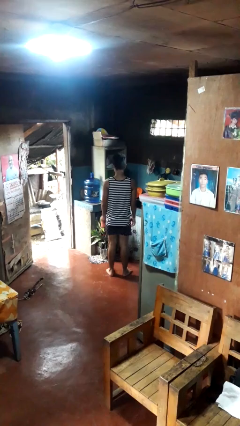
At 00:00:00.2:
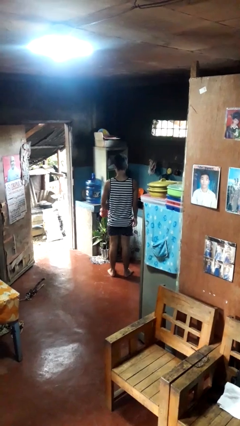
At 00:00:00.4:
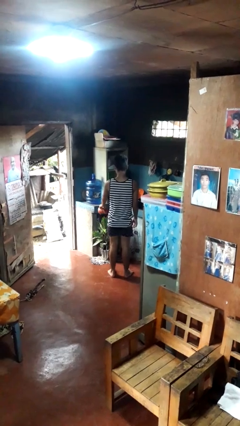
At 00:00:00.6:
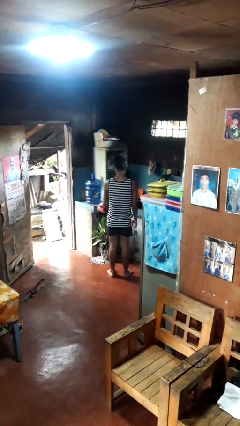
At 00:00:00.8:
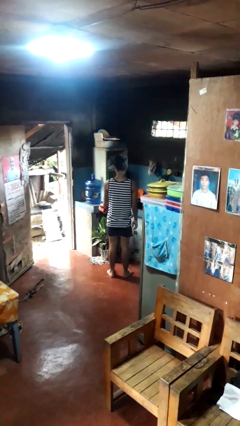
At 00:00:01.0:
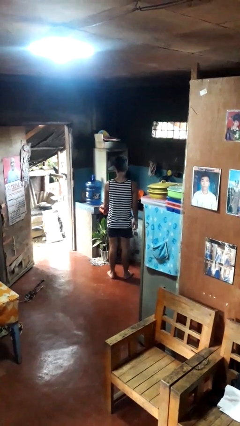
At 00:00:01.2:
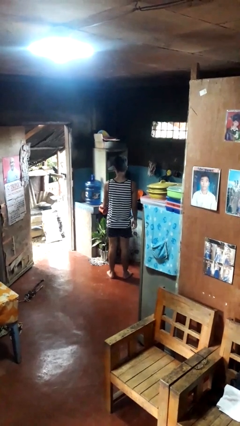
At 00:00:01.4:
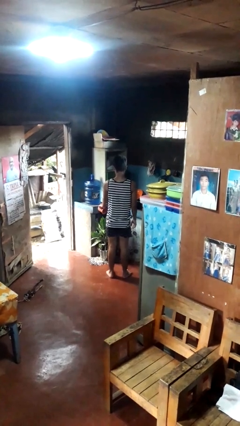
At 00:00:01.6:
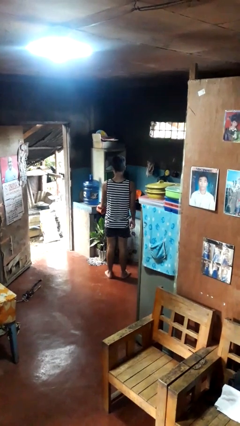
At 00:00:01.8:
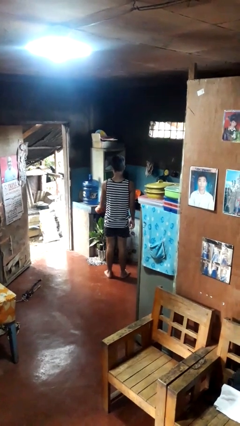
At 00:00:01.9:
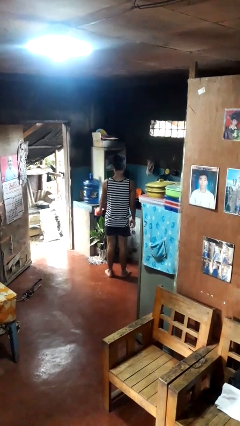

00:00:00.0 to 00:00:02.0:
person waters houseplant

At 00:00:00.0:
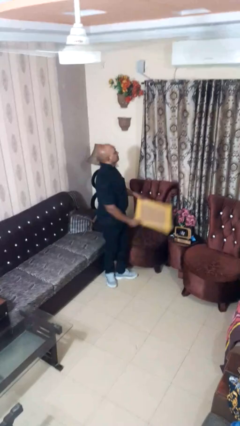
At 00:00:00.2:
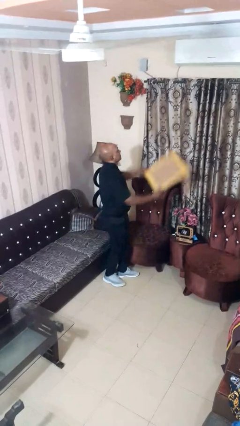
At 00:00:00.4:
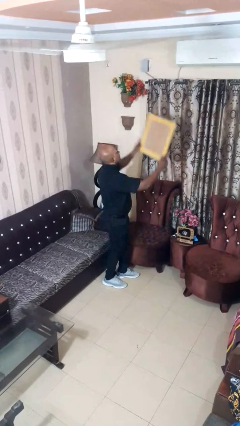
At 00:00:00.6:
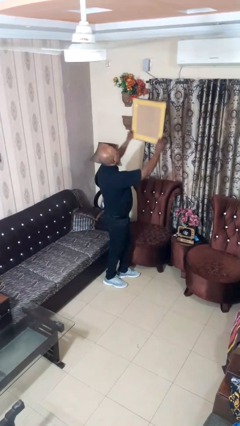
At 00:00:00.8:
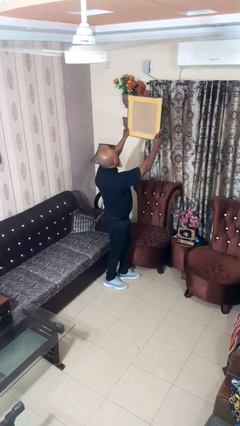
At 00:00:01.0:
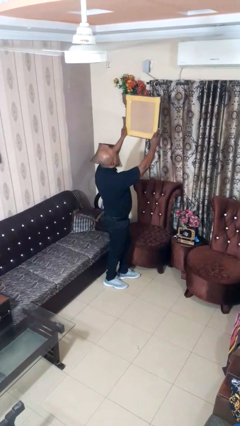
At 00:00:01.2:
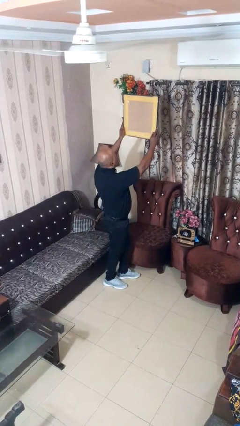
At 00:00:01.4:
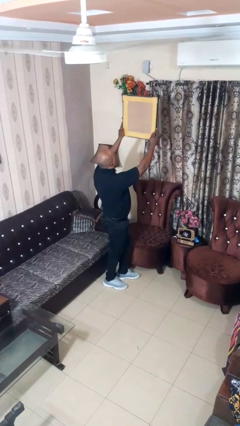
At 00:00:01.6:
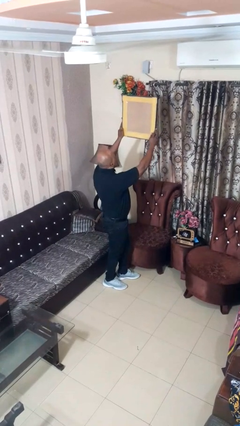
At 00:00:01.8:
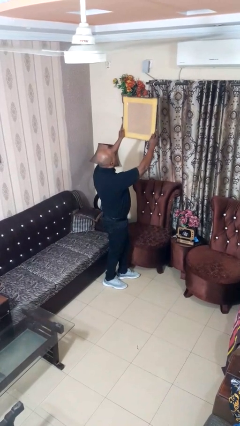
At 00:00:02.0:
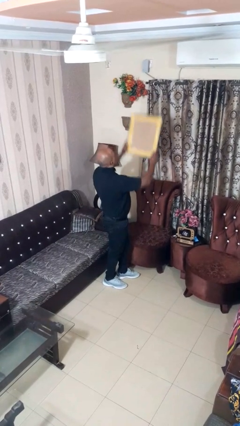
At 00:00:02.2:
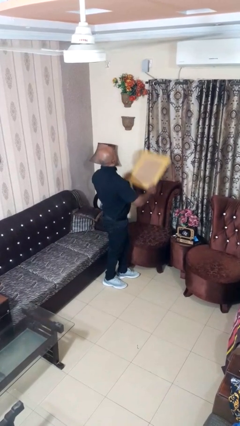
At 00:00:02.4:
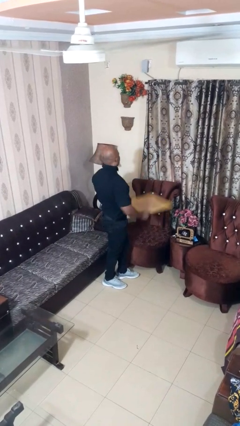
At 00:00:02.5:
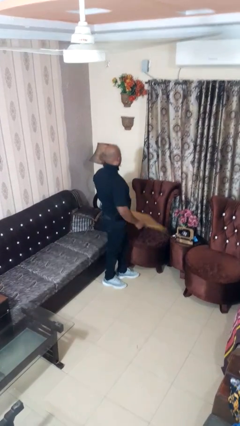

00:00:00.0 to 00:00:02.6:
person holds object above head

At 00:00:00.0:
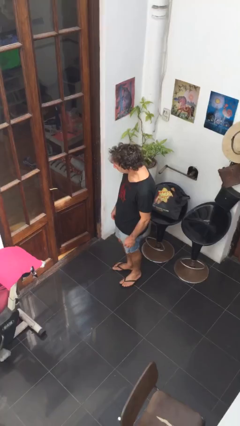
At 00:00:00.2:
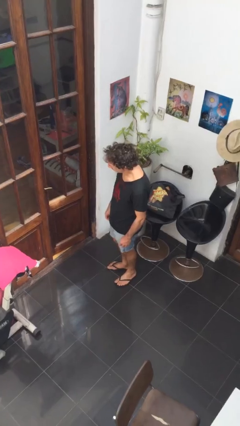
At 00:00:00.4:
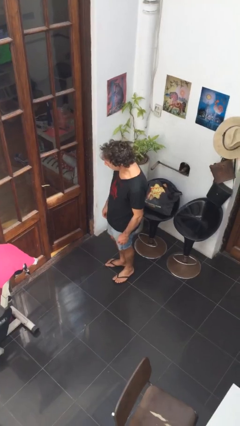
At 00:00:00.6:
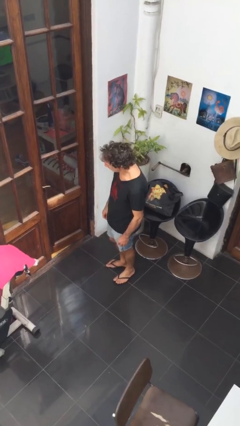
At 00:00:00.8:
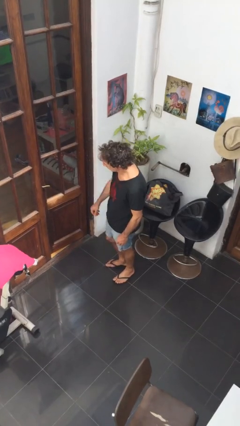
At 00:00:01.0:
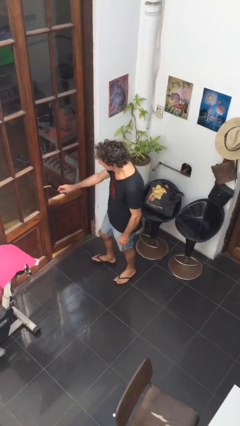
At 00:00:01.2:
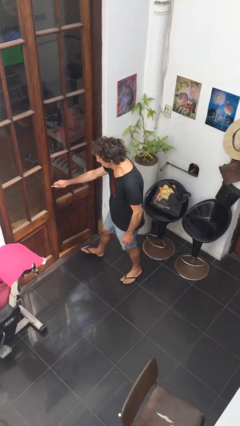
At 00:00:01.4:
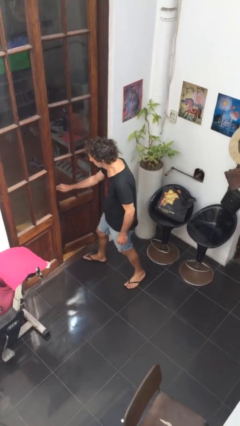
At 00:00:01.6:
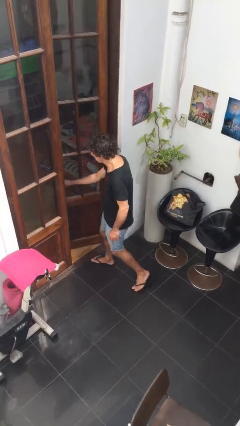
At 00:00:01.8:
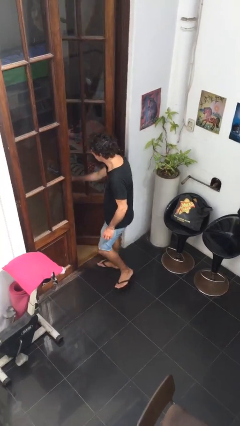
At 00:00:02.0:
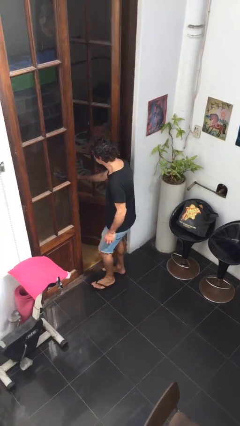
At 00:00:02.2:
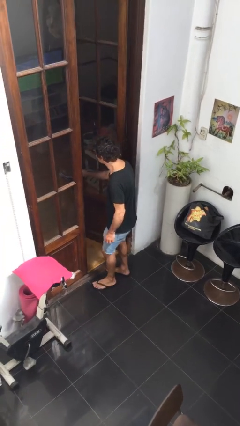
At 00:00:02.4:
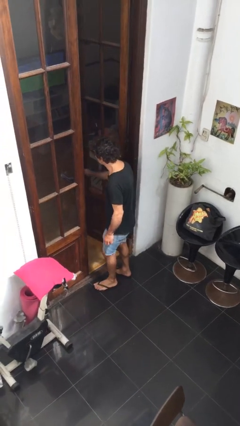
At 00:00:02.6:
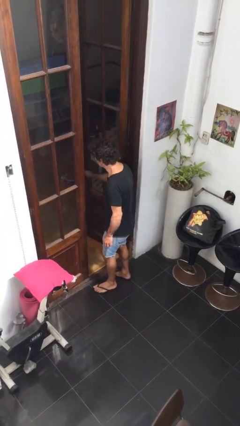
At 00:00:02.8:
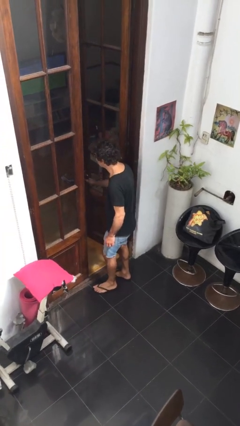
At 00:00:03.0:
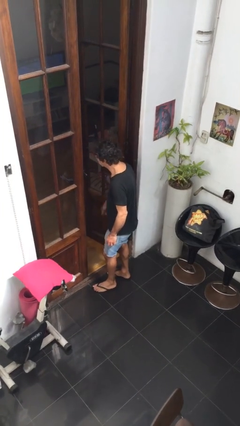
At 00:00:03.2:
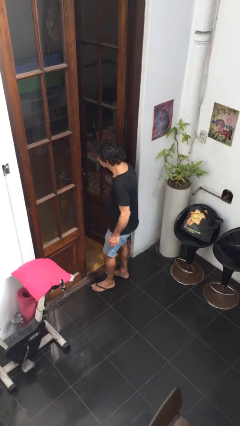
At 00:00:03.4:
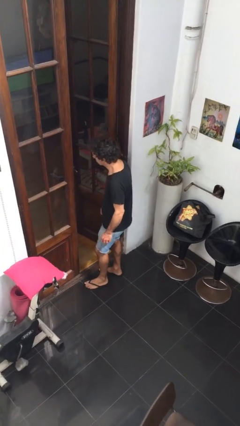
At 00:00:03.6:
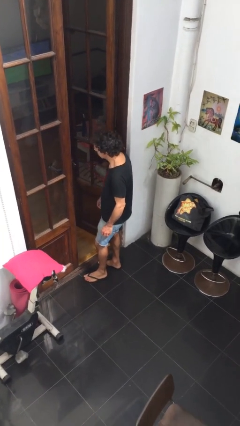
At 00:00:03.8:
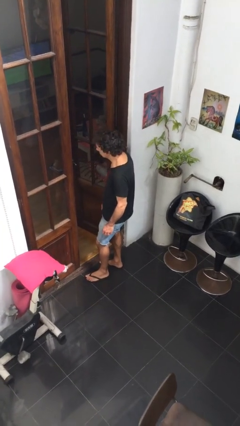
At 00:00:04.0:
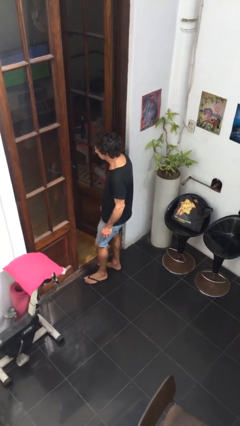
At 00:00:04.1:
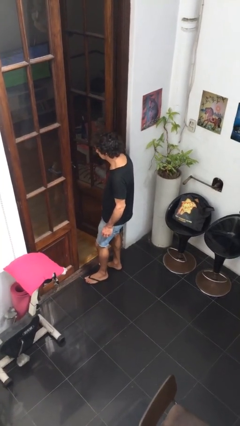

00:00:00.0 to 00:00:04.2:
person opens facility door

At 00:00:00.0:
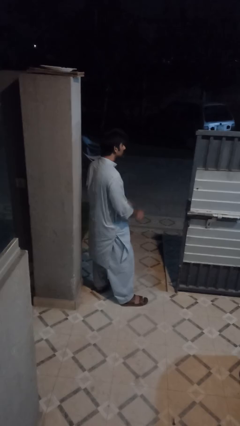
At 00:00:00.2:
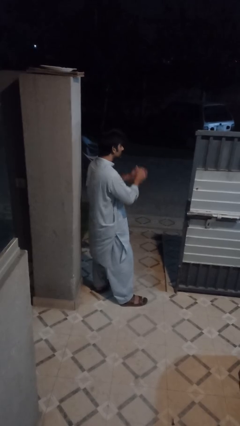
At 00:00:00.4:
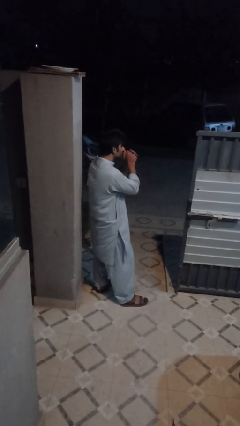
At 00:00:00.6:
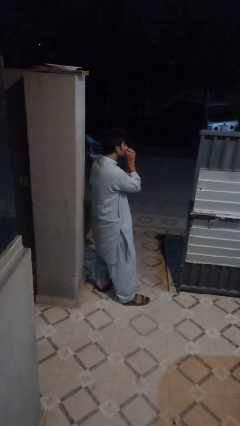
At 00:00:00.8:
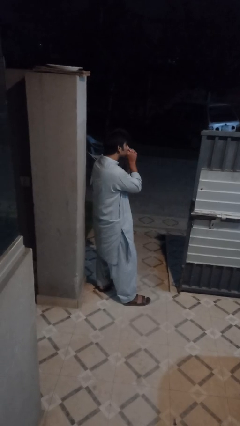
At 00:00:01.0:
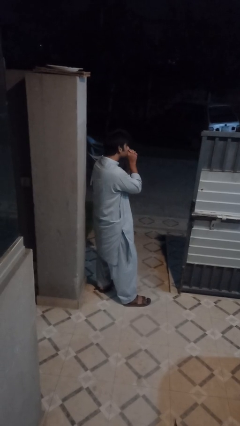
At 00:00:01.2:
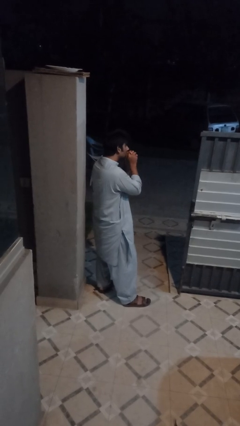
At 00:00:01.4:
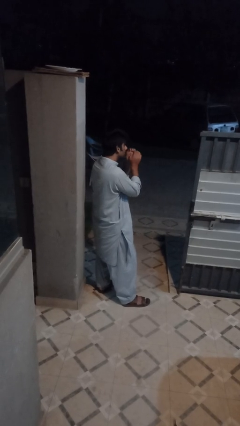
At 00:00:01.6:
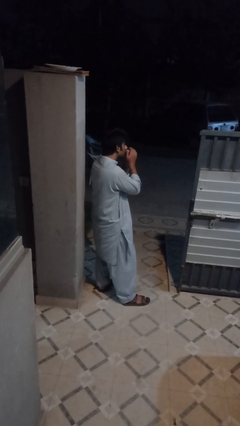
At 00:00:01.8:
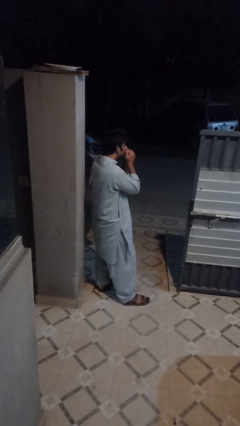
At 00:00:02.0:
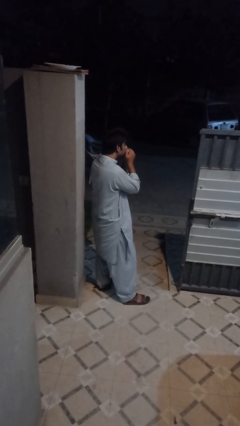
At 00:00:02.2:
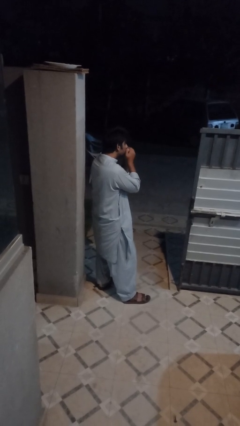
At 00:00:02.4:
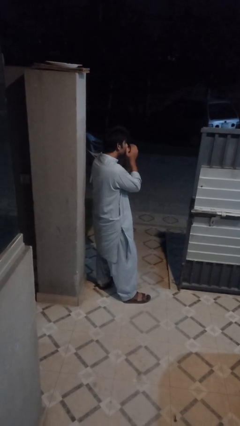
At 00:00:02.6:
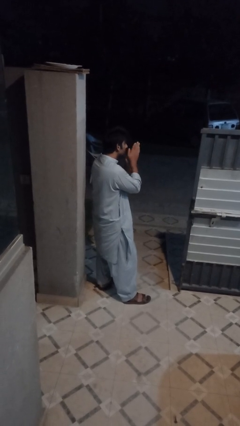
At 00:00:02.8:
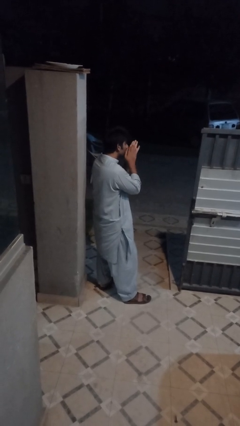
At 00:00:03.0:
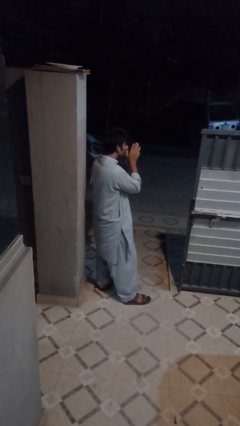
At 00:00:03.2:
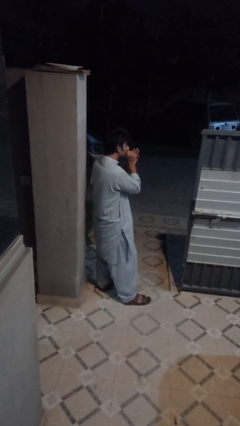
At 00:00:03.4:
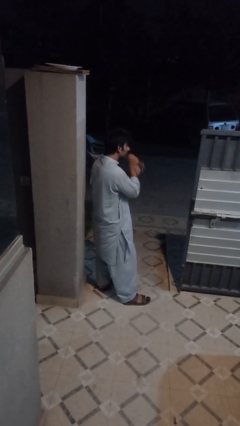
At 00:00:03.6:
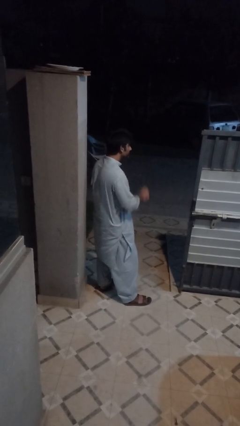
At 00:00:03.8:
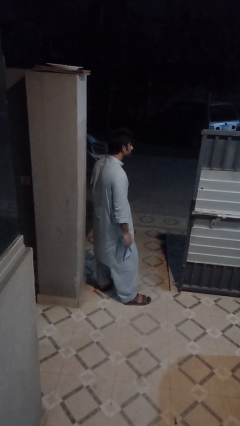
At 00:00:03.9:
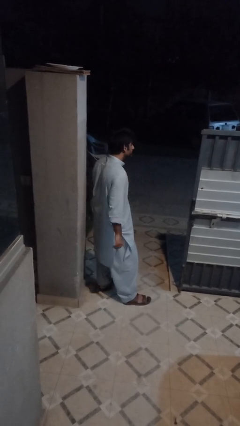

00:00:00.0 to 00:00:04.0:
person blows into hands

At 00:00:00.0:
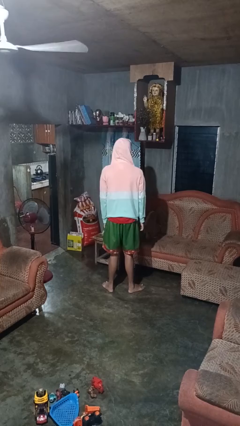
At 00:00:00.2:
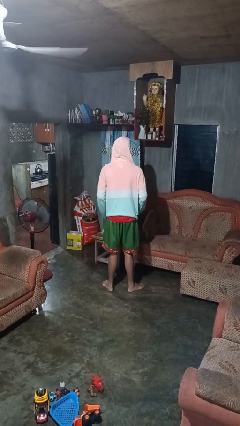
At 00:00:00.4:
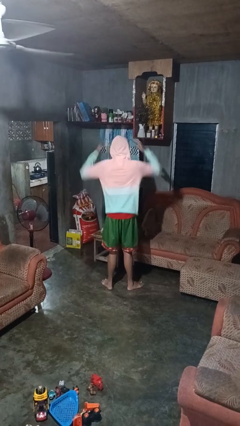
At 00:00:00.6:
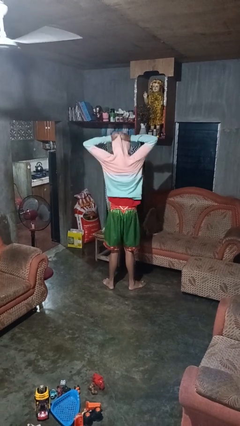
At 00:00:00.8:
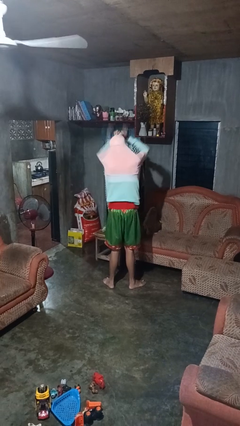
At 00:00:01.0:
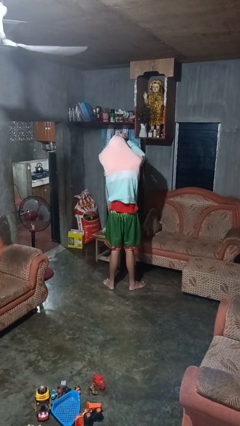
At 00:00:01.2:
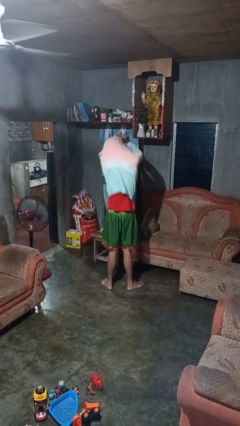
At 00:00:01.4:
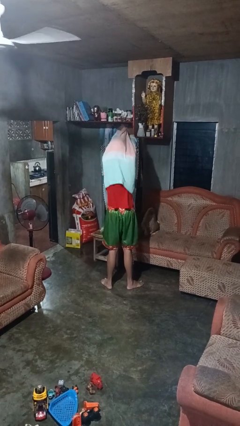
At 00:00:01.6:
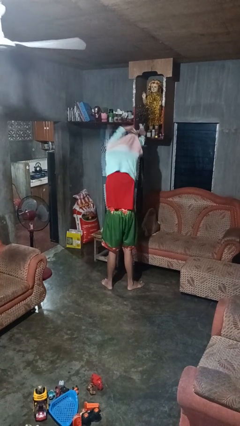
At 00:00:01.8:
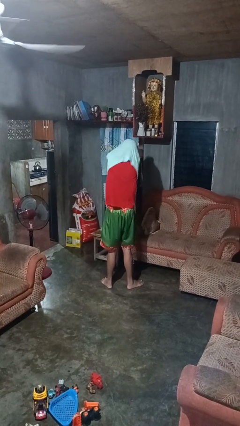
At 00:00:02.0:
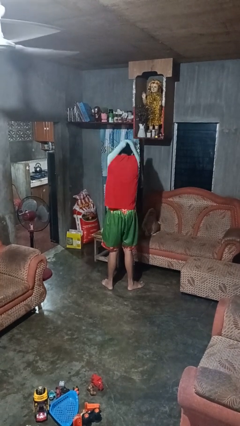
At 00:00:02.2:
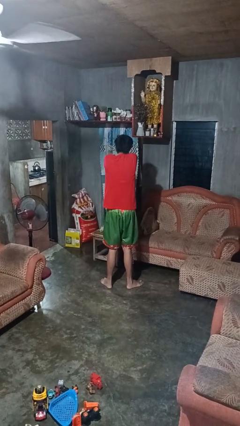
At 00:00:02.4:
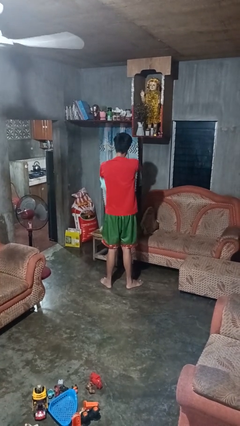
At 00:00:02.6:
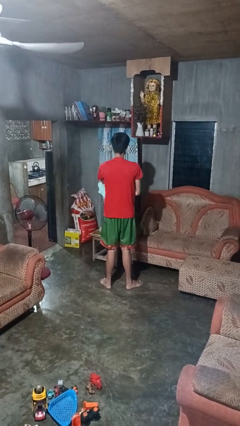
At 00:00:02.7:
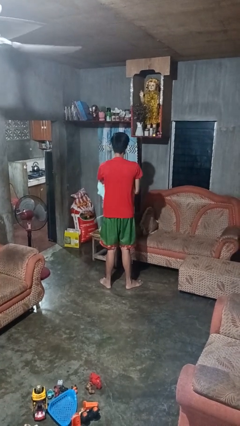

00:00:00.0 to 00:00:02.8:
person takes off hoodie

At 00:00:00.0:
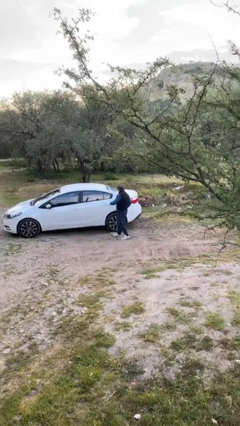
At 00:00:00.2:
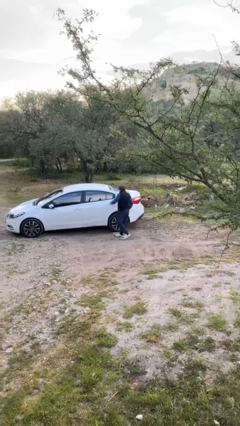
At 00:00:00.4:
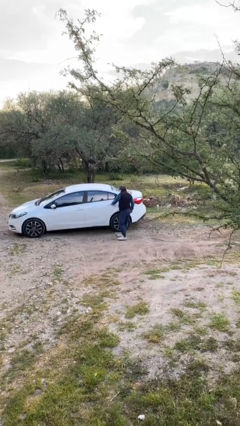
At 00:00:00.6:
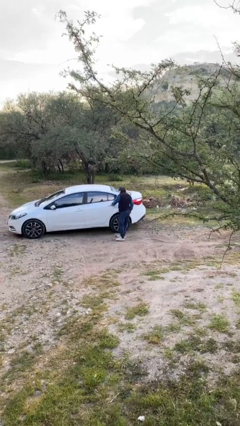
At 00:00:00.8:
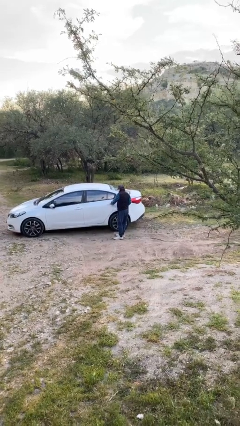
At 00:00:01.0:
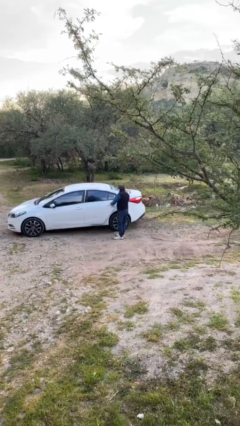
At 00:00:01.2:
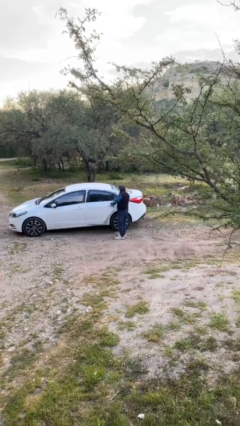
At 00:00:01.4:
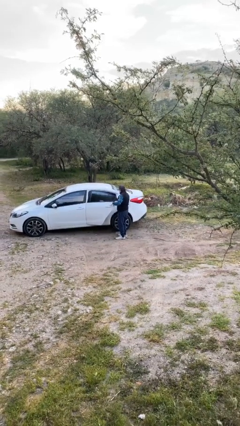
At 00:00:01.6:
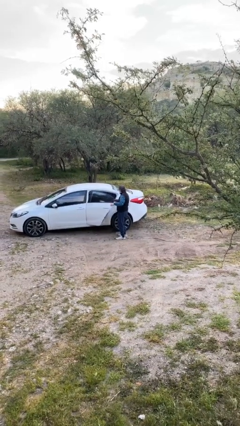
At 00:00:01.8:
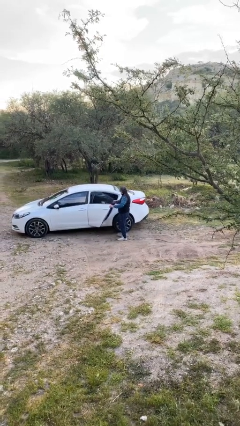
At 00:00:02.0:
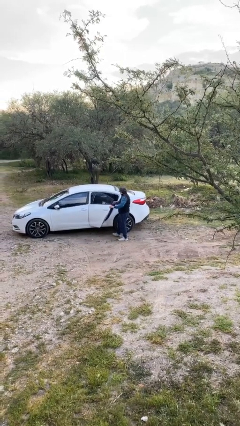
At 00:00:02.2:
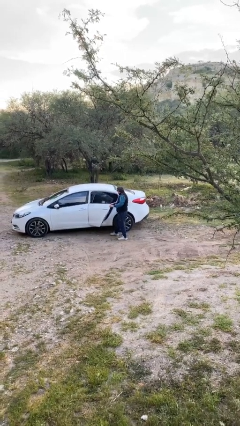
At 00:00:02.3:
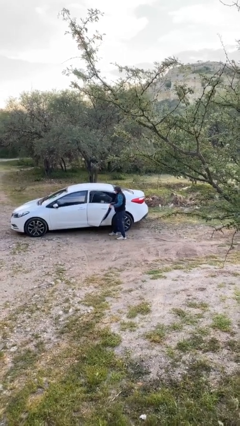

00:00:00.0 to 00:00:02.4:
person opens car door
